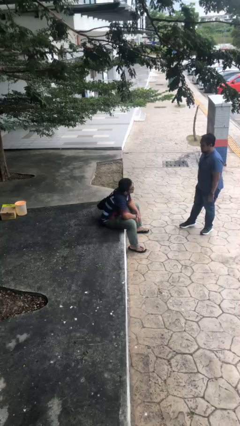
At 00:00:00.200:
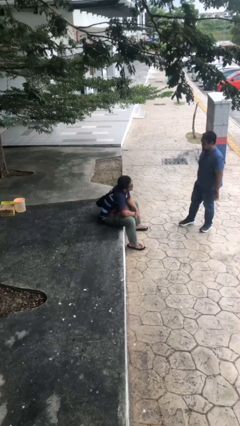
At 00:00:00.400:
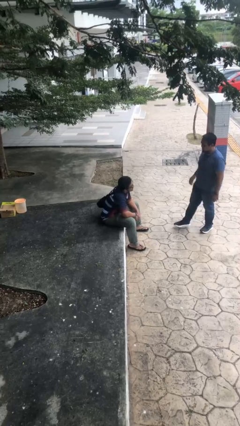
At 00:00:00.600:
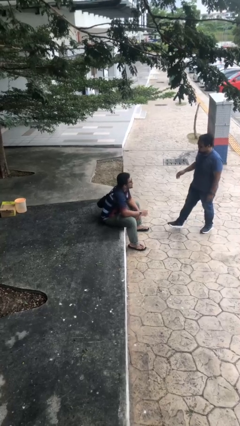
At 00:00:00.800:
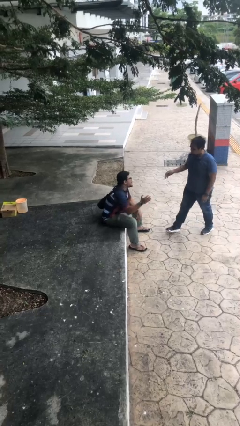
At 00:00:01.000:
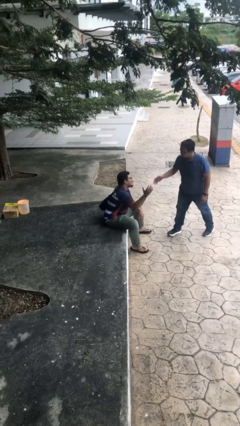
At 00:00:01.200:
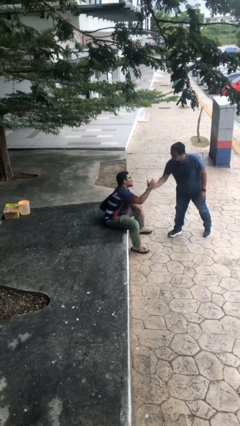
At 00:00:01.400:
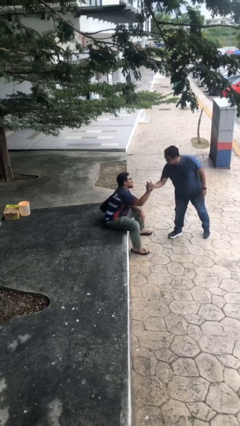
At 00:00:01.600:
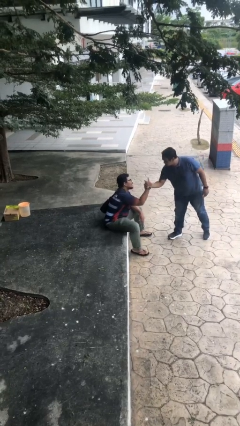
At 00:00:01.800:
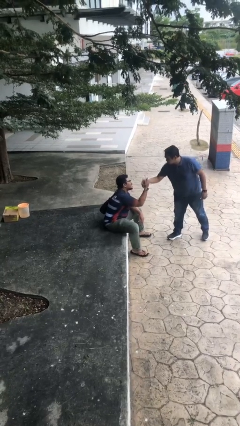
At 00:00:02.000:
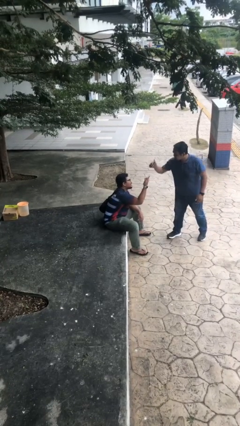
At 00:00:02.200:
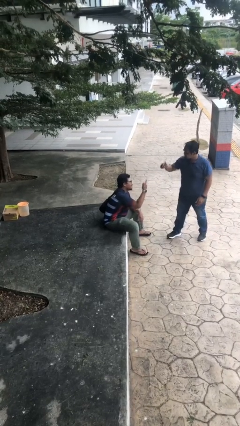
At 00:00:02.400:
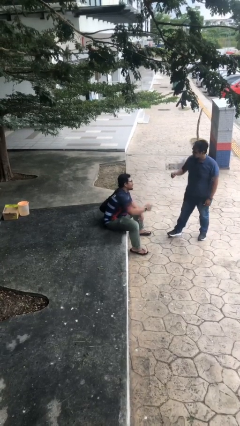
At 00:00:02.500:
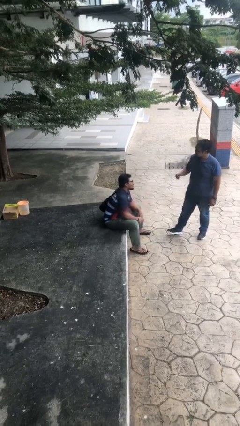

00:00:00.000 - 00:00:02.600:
person shakes hand

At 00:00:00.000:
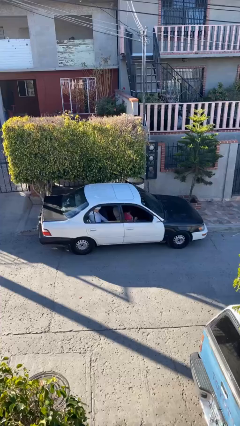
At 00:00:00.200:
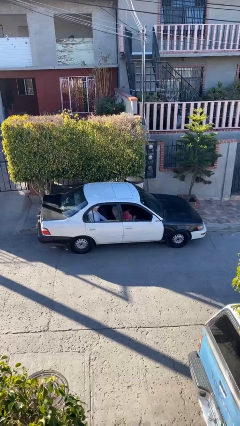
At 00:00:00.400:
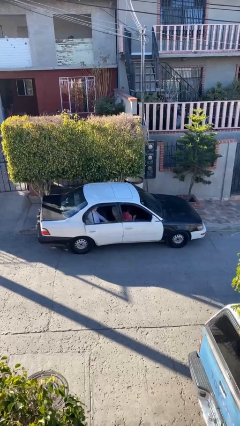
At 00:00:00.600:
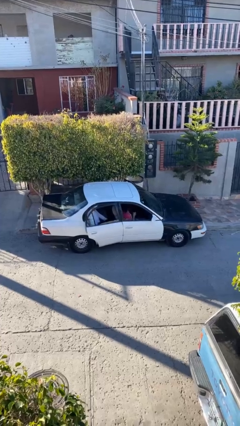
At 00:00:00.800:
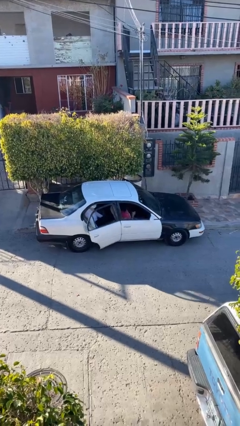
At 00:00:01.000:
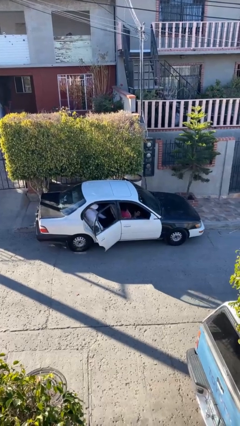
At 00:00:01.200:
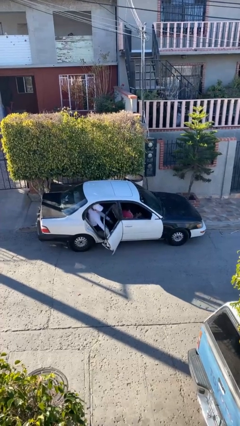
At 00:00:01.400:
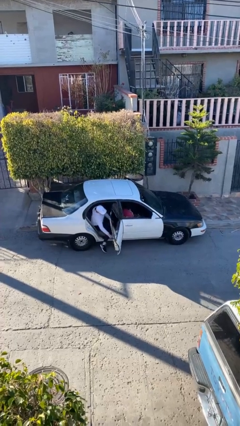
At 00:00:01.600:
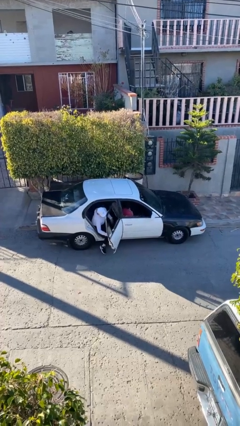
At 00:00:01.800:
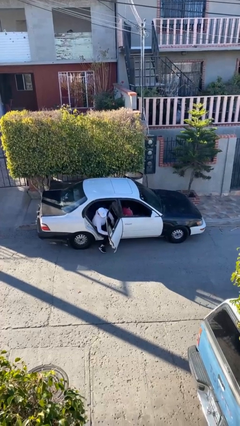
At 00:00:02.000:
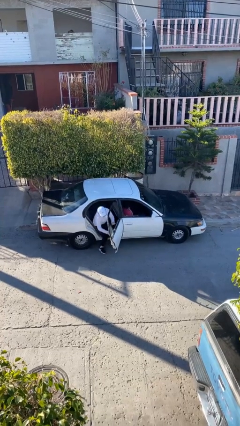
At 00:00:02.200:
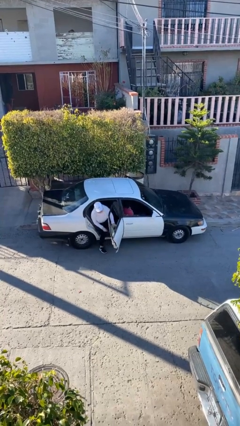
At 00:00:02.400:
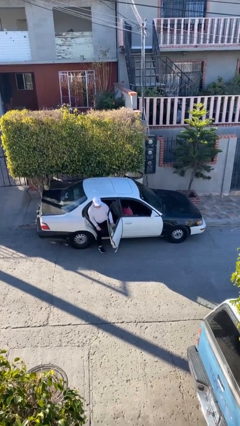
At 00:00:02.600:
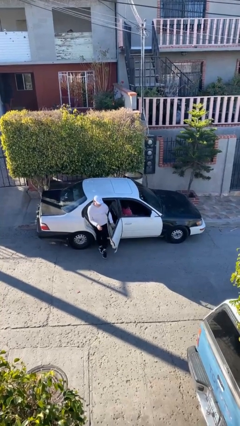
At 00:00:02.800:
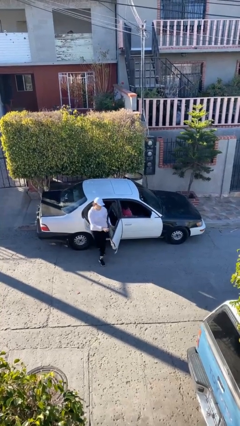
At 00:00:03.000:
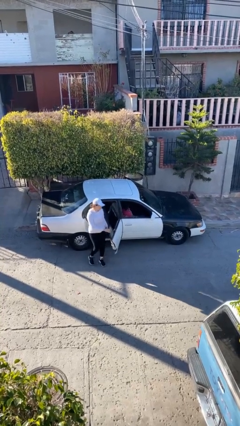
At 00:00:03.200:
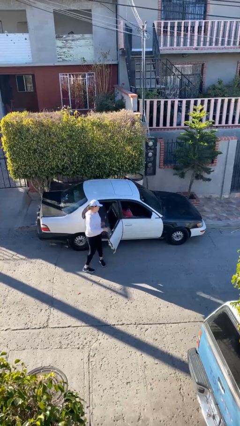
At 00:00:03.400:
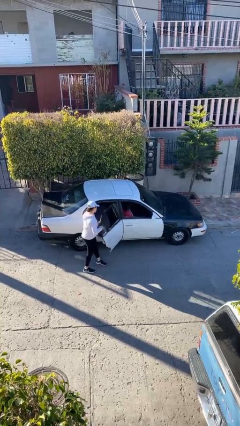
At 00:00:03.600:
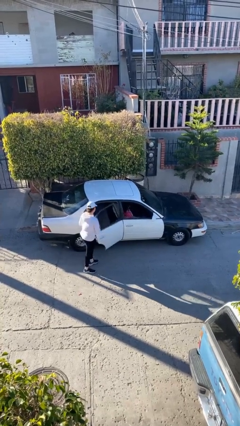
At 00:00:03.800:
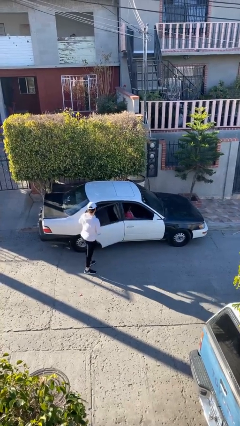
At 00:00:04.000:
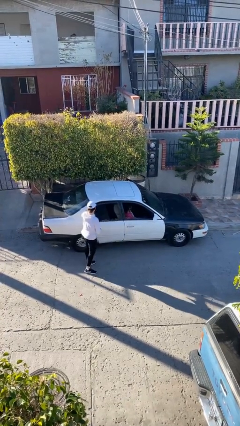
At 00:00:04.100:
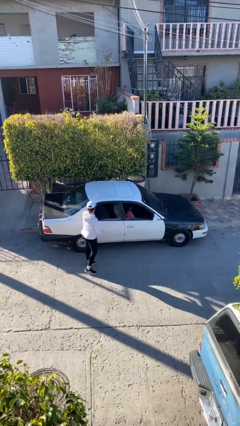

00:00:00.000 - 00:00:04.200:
car drops off person

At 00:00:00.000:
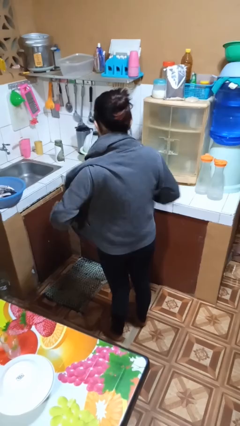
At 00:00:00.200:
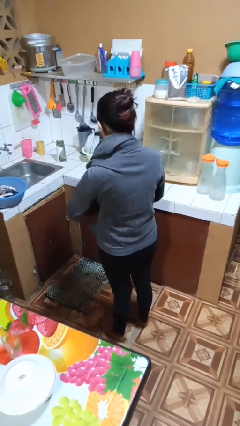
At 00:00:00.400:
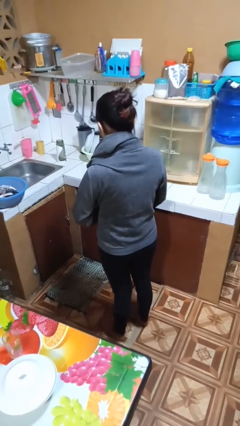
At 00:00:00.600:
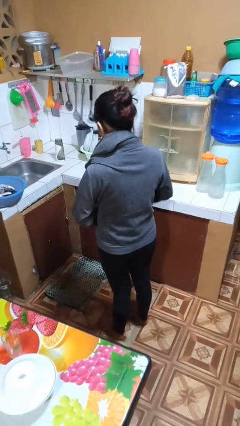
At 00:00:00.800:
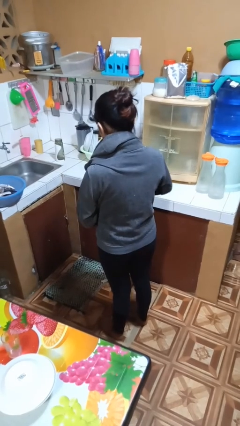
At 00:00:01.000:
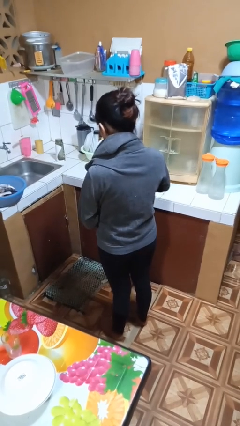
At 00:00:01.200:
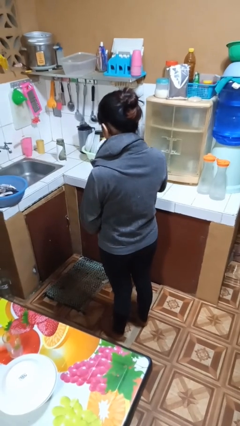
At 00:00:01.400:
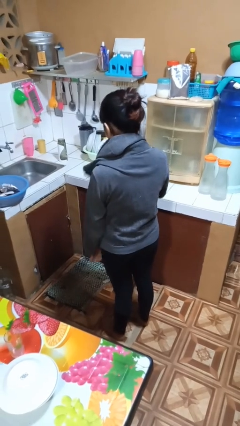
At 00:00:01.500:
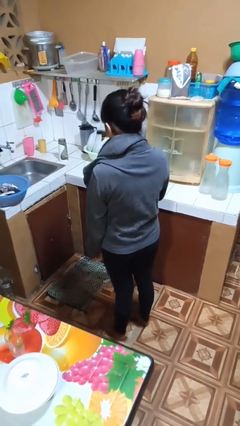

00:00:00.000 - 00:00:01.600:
person zips up jacket

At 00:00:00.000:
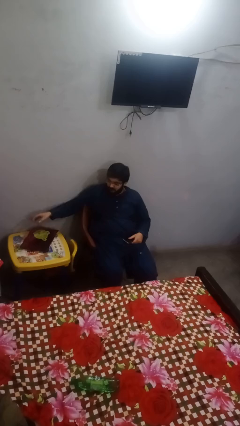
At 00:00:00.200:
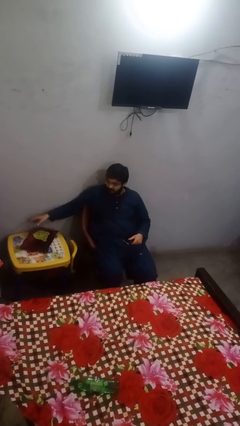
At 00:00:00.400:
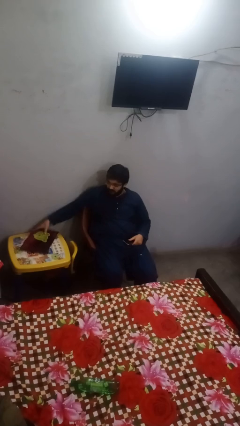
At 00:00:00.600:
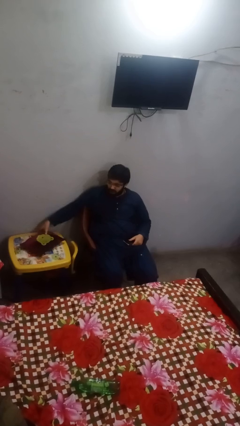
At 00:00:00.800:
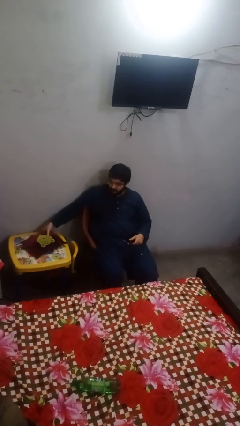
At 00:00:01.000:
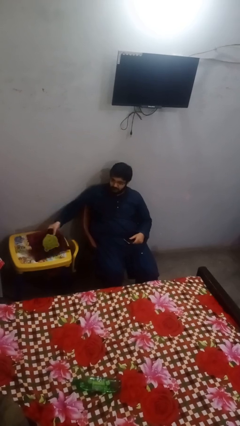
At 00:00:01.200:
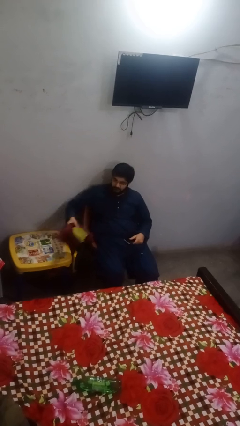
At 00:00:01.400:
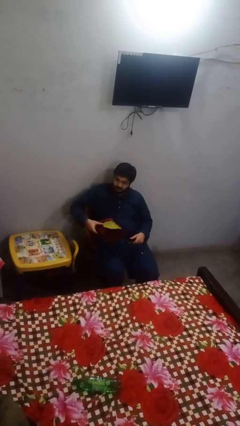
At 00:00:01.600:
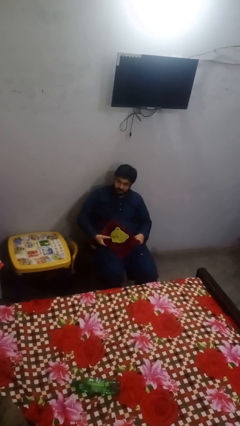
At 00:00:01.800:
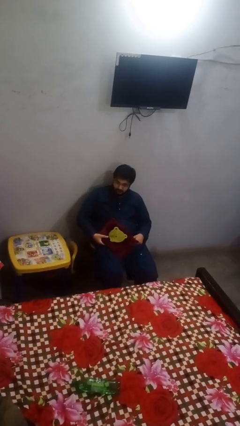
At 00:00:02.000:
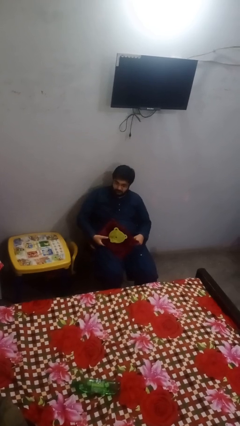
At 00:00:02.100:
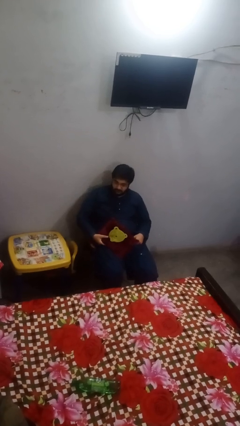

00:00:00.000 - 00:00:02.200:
person picks up object from table

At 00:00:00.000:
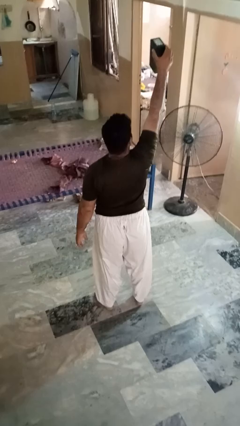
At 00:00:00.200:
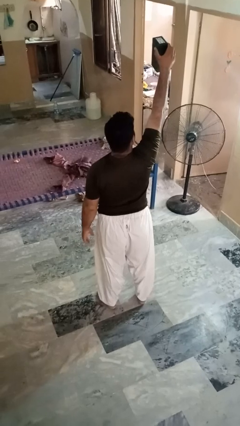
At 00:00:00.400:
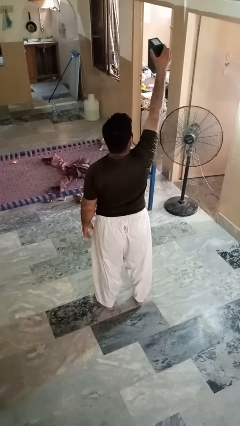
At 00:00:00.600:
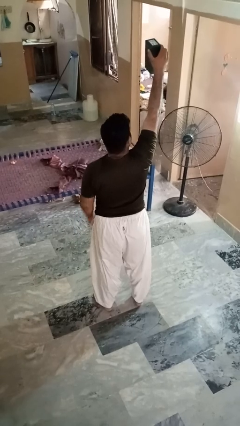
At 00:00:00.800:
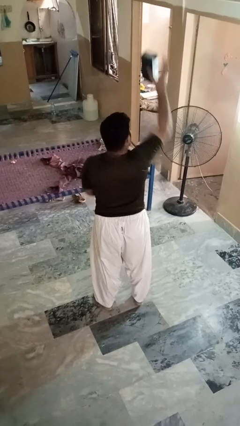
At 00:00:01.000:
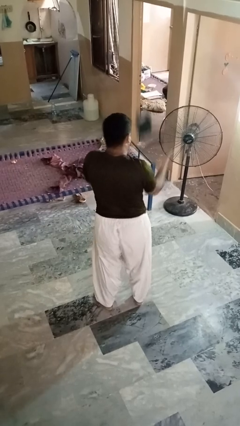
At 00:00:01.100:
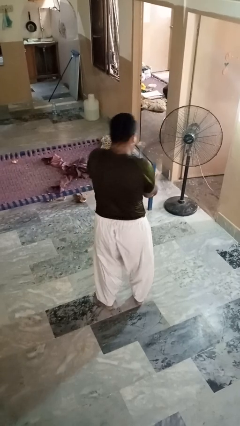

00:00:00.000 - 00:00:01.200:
person drops object

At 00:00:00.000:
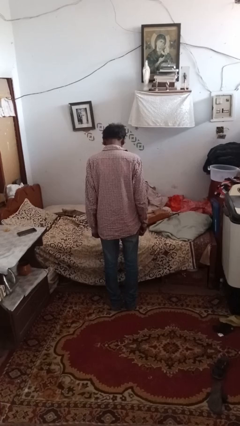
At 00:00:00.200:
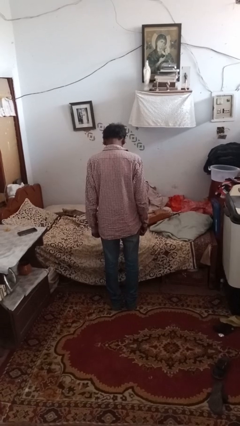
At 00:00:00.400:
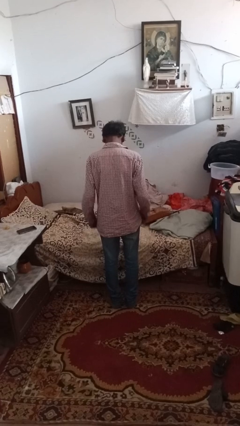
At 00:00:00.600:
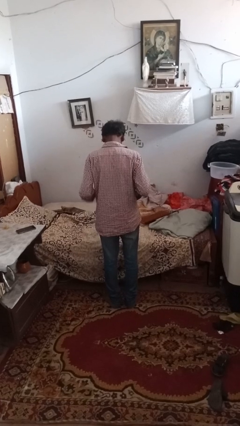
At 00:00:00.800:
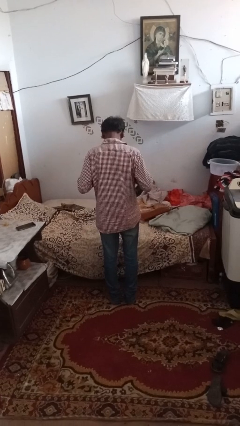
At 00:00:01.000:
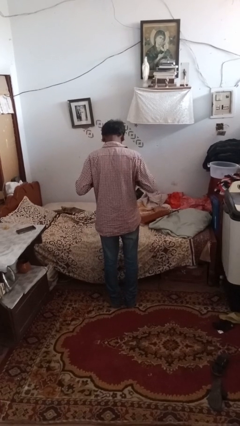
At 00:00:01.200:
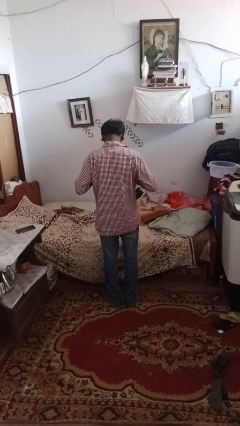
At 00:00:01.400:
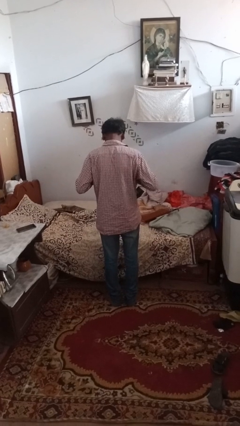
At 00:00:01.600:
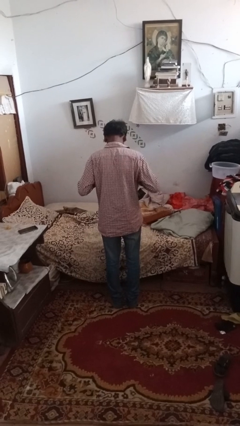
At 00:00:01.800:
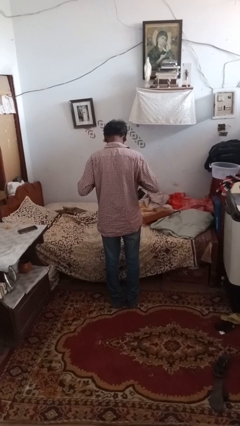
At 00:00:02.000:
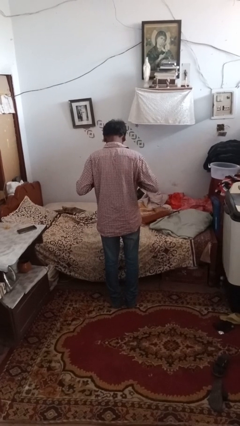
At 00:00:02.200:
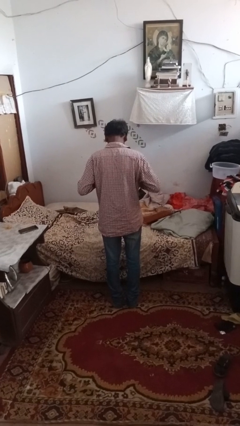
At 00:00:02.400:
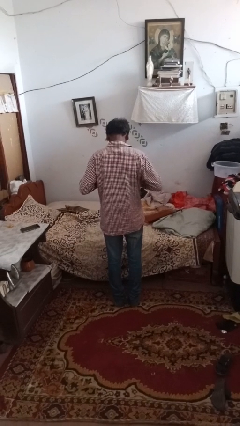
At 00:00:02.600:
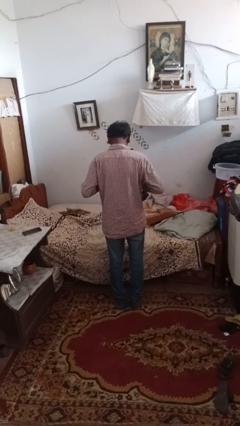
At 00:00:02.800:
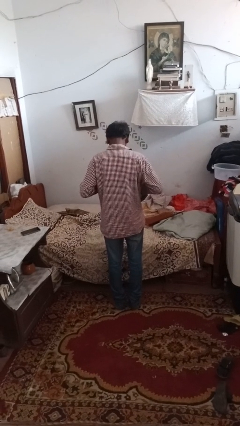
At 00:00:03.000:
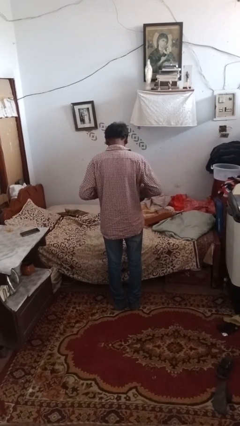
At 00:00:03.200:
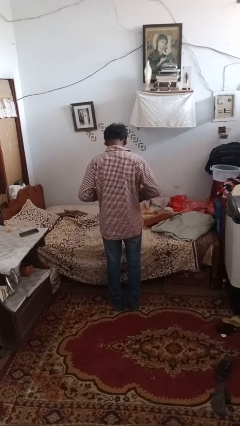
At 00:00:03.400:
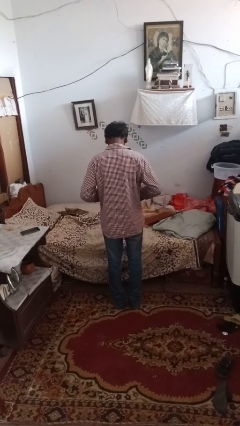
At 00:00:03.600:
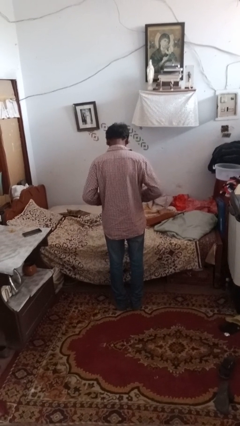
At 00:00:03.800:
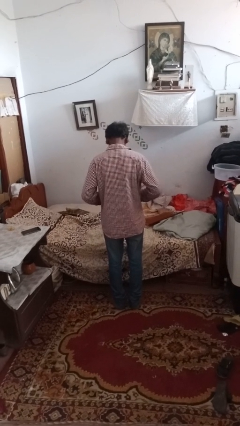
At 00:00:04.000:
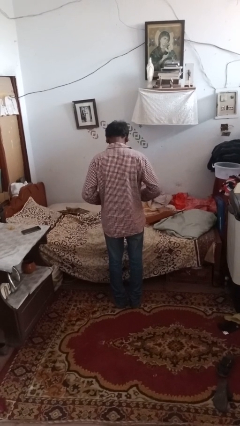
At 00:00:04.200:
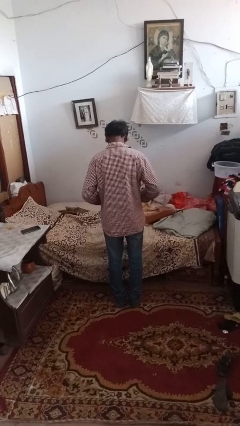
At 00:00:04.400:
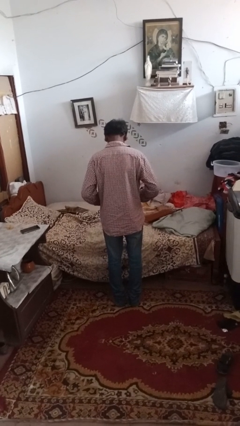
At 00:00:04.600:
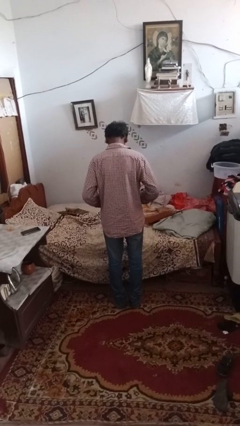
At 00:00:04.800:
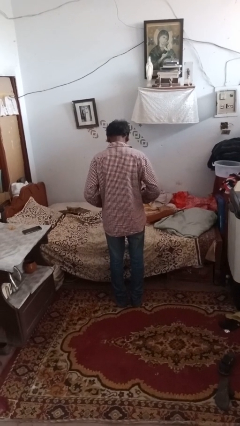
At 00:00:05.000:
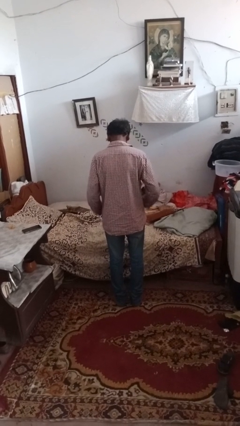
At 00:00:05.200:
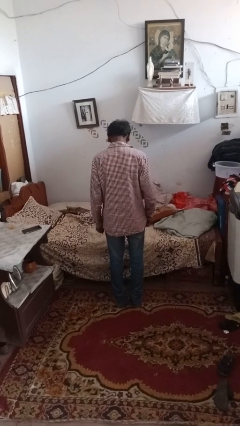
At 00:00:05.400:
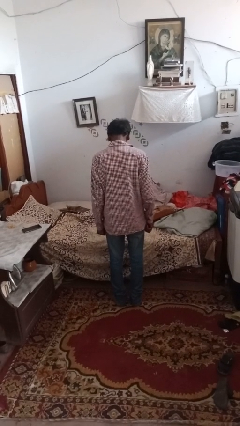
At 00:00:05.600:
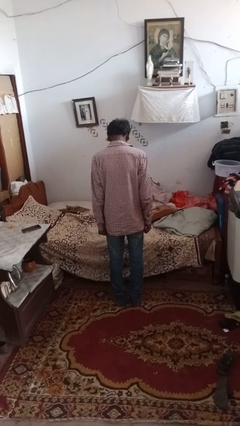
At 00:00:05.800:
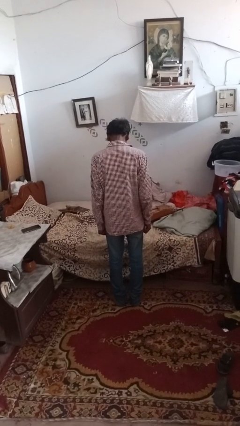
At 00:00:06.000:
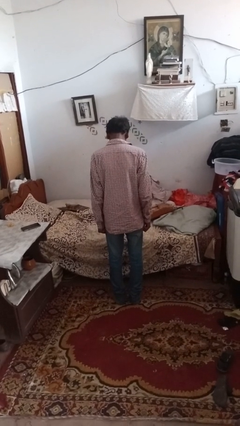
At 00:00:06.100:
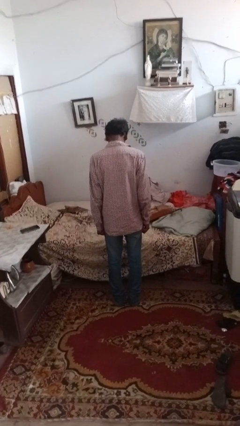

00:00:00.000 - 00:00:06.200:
person unbuttons shirt
